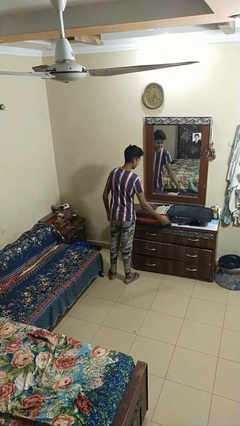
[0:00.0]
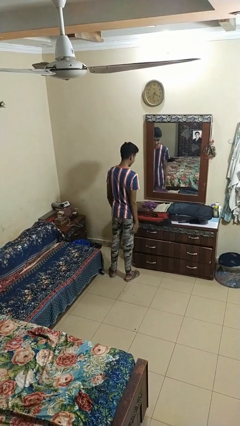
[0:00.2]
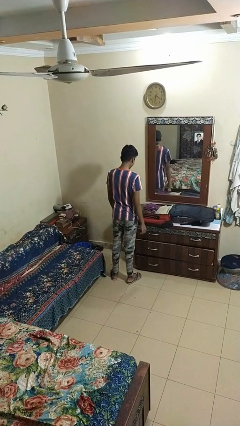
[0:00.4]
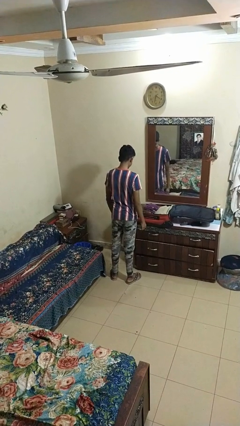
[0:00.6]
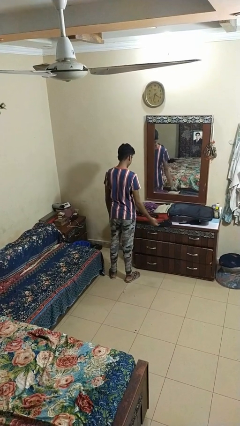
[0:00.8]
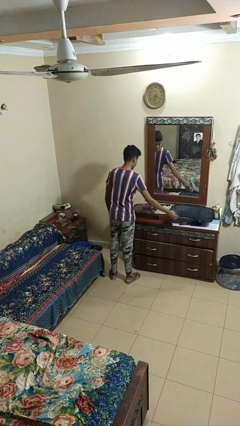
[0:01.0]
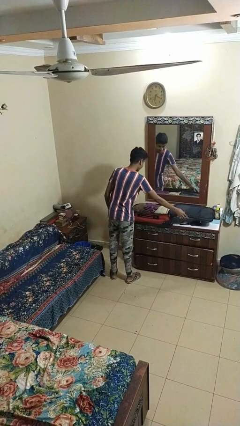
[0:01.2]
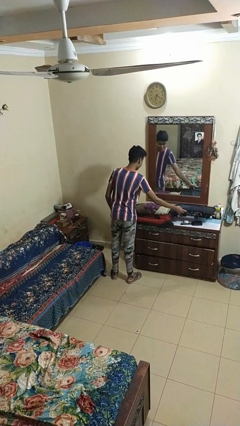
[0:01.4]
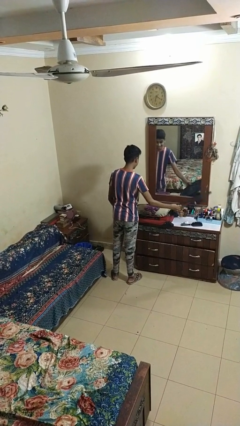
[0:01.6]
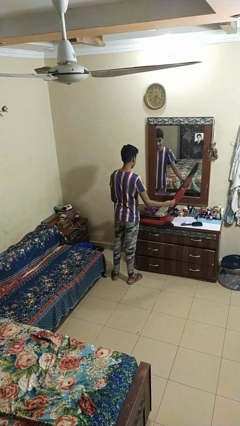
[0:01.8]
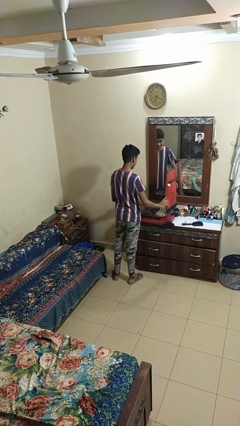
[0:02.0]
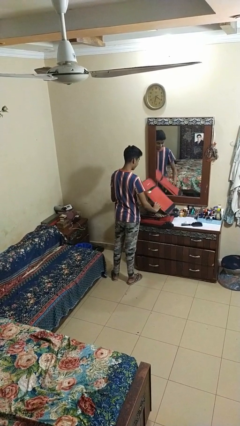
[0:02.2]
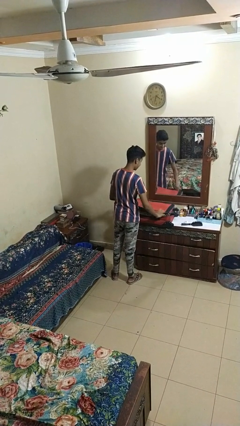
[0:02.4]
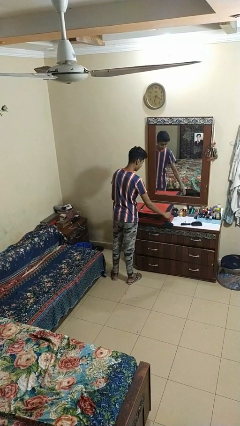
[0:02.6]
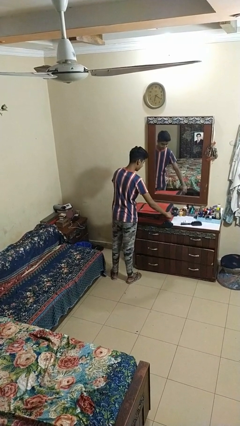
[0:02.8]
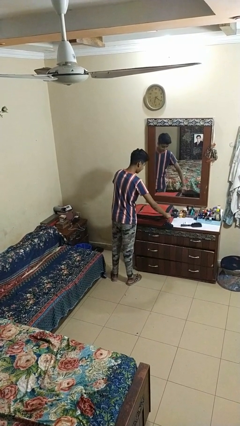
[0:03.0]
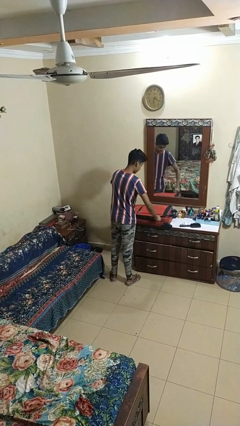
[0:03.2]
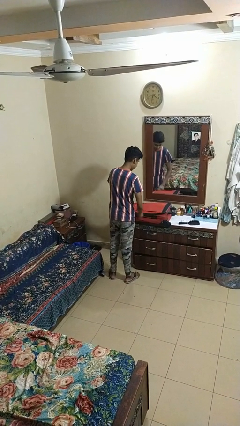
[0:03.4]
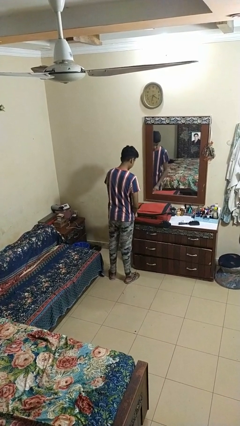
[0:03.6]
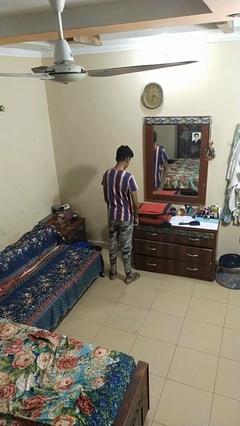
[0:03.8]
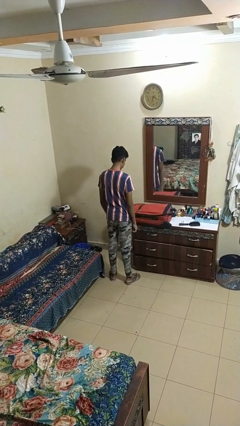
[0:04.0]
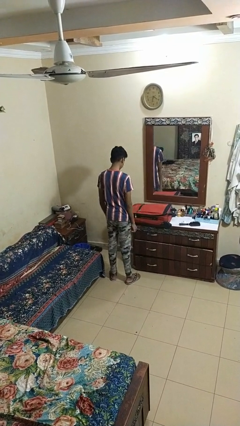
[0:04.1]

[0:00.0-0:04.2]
person closes suitcase

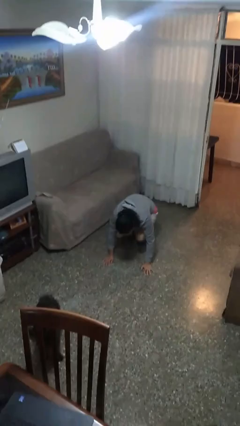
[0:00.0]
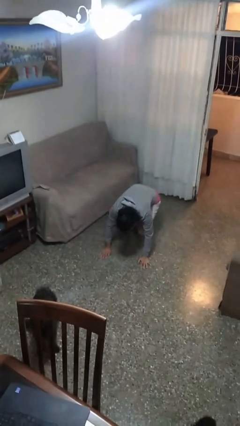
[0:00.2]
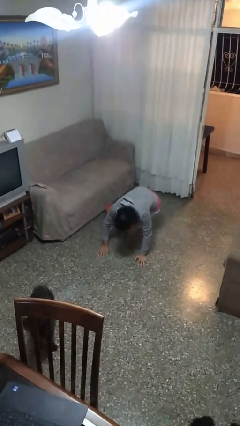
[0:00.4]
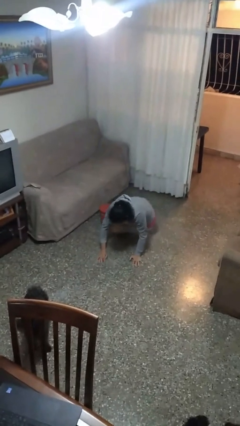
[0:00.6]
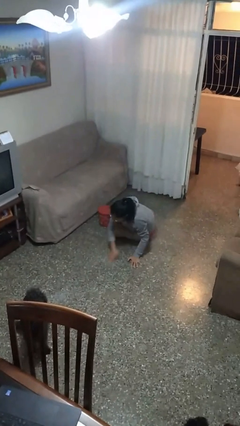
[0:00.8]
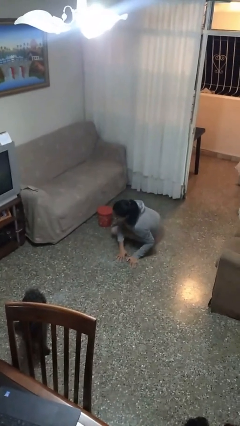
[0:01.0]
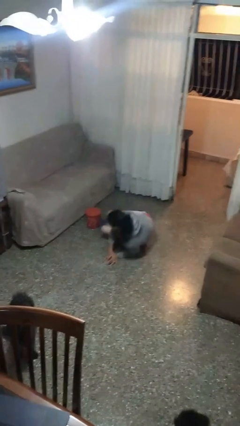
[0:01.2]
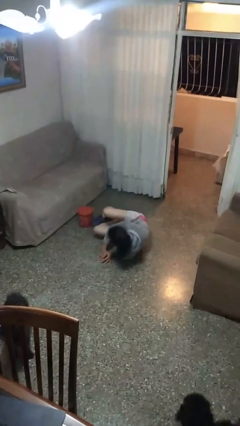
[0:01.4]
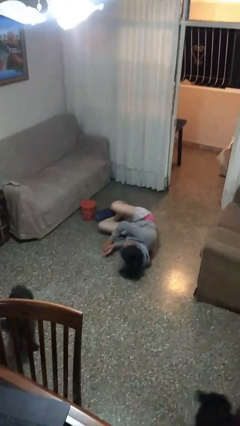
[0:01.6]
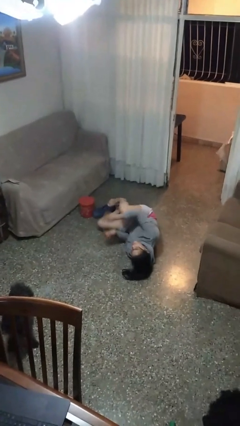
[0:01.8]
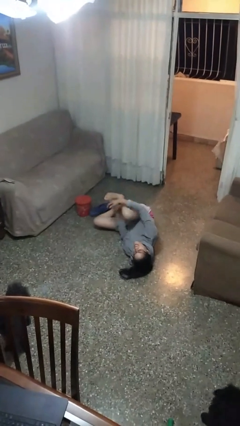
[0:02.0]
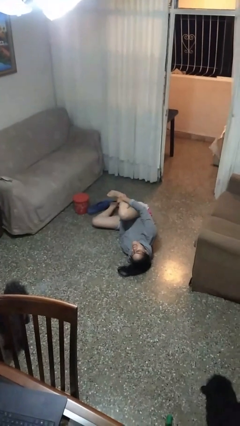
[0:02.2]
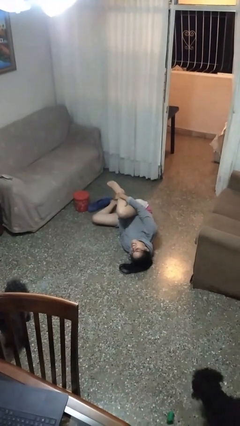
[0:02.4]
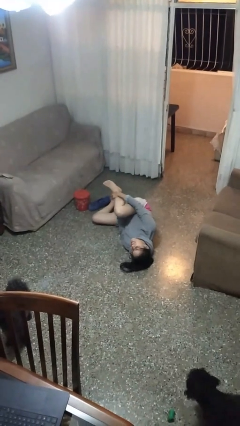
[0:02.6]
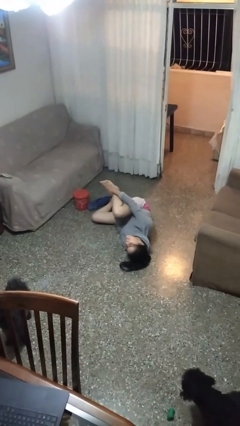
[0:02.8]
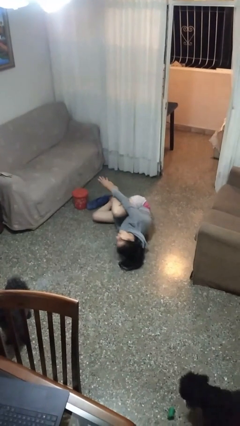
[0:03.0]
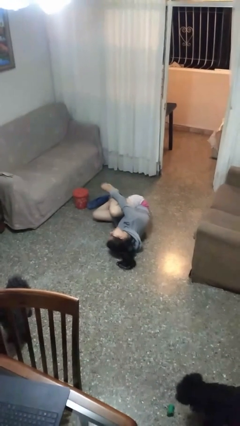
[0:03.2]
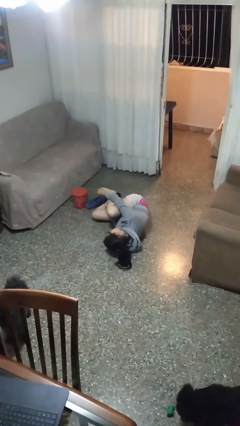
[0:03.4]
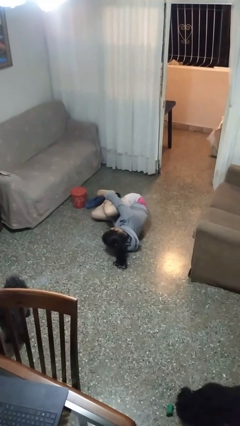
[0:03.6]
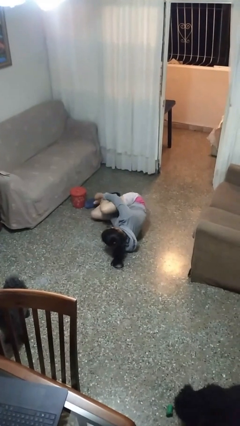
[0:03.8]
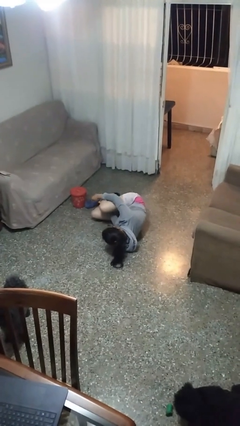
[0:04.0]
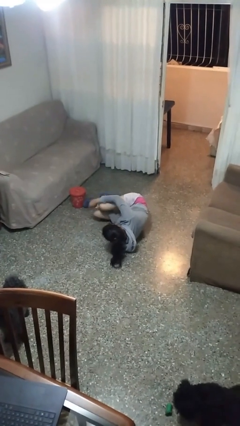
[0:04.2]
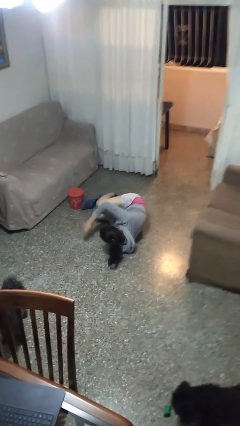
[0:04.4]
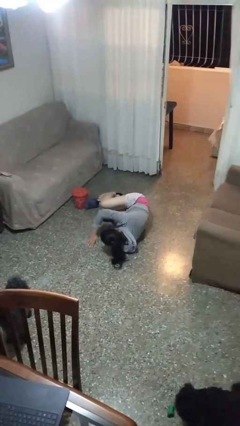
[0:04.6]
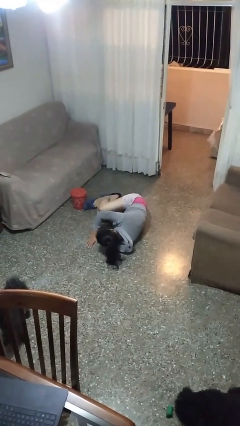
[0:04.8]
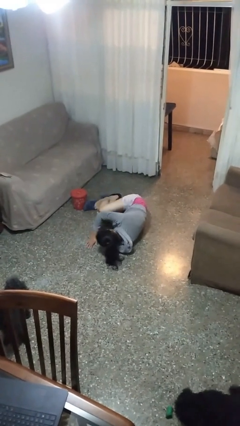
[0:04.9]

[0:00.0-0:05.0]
person lies down on floor

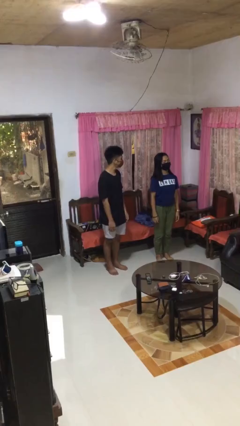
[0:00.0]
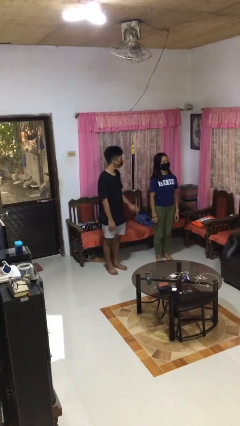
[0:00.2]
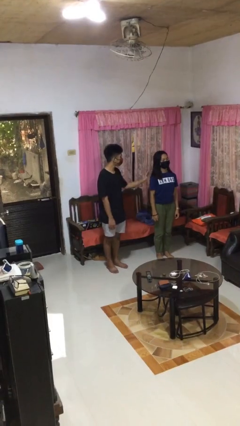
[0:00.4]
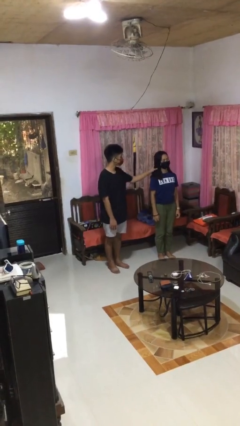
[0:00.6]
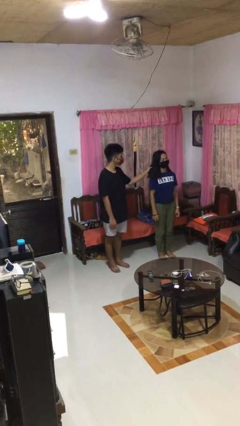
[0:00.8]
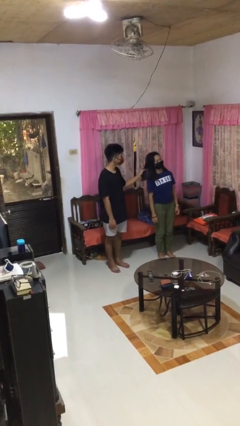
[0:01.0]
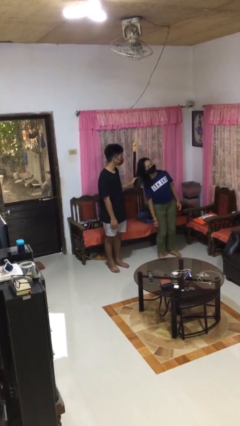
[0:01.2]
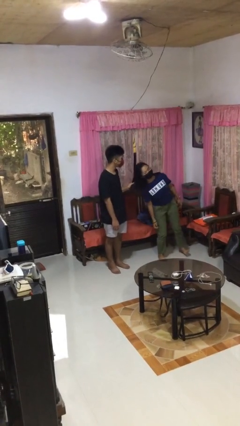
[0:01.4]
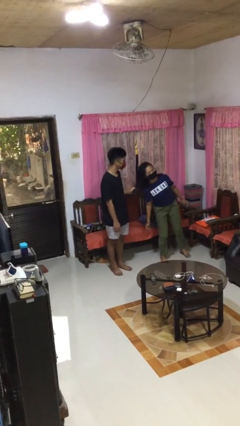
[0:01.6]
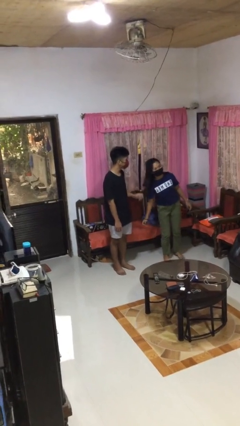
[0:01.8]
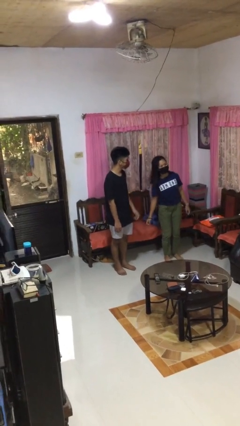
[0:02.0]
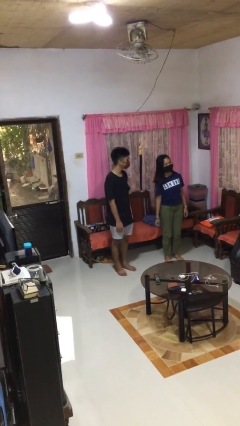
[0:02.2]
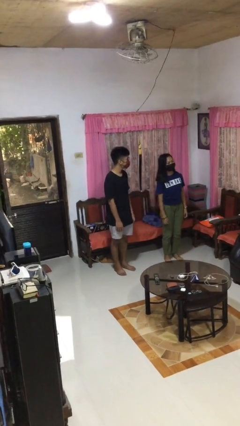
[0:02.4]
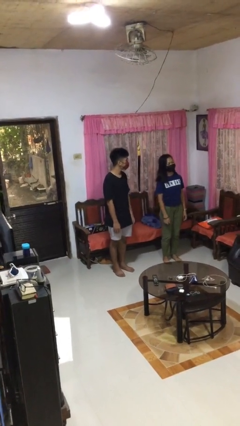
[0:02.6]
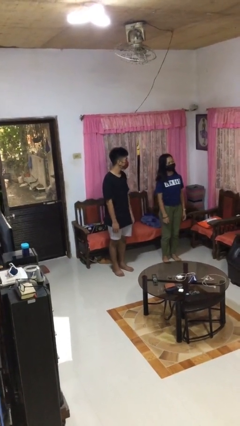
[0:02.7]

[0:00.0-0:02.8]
person grabs person by hair

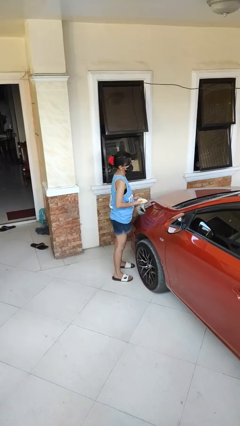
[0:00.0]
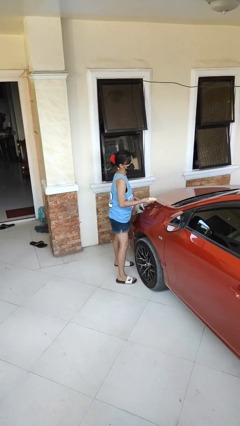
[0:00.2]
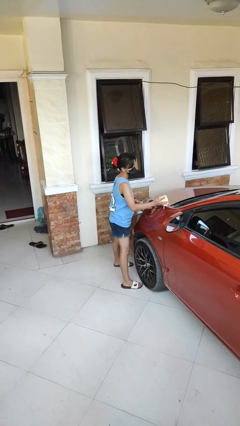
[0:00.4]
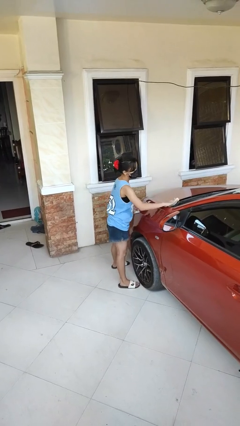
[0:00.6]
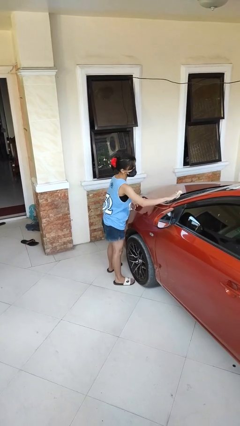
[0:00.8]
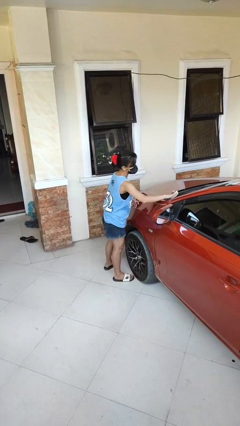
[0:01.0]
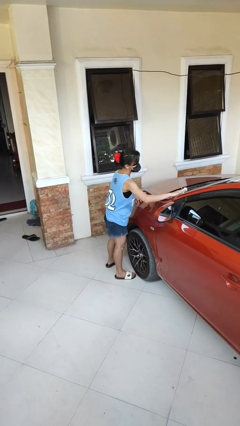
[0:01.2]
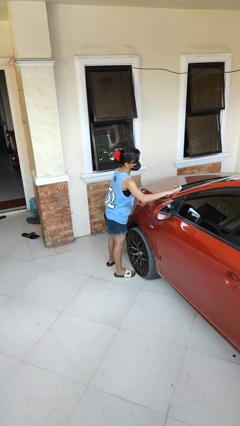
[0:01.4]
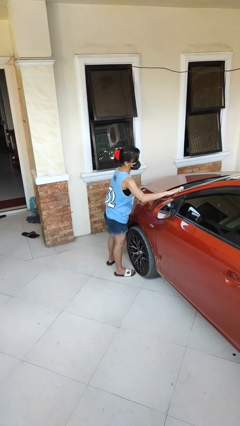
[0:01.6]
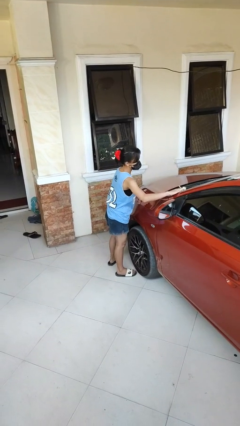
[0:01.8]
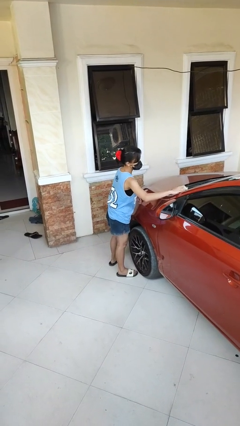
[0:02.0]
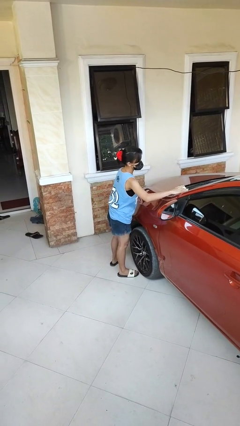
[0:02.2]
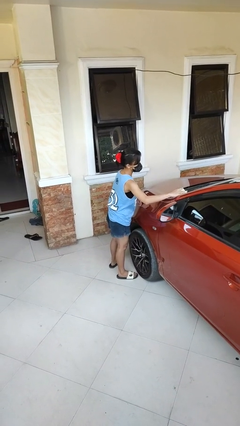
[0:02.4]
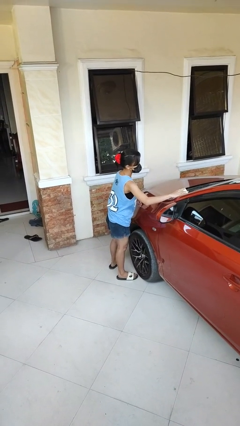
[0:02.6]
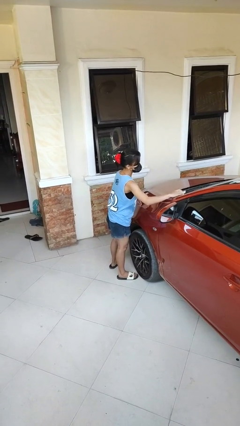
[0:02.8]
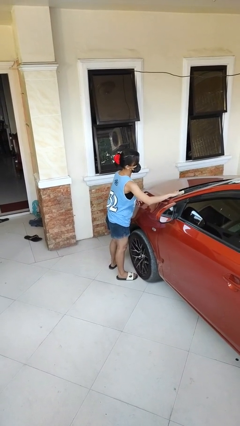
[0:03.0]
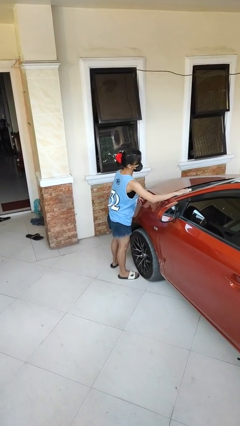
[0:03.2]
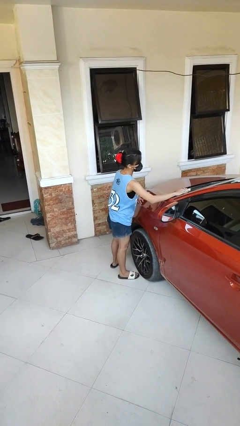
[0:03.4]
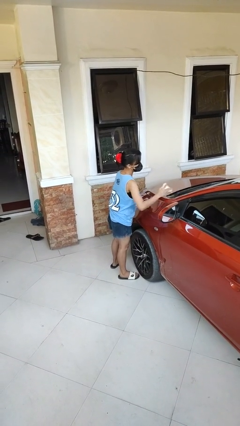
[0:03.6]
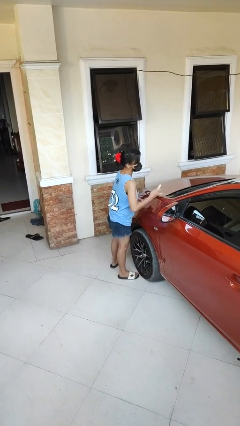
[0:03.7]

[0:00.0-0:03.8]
person polishes car with rag

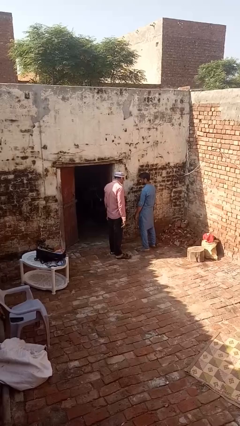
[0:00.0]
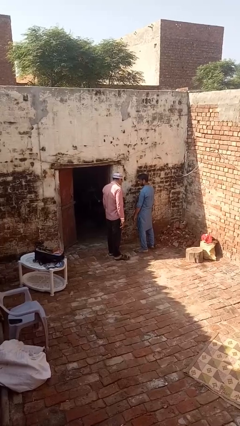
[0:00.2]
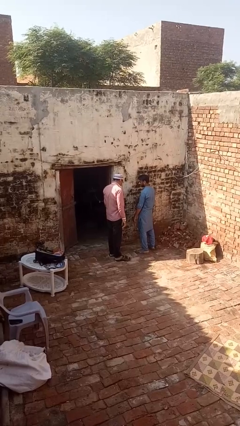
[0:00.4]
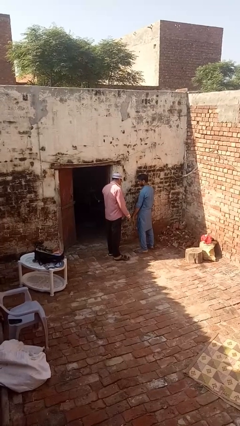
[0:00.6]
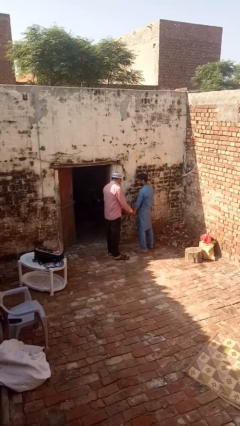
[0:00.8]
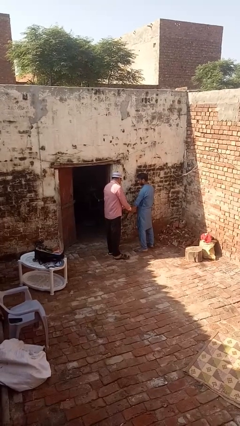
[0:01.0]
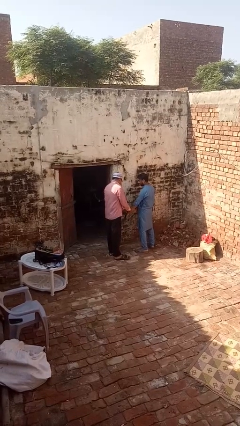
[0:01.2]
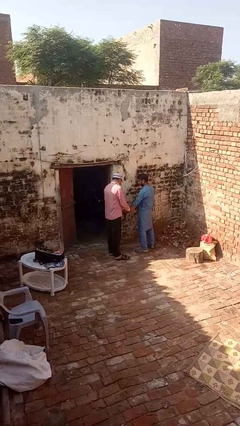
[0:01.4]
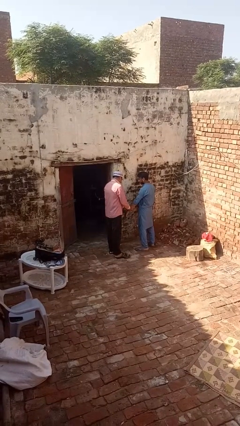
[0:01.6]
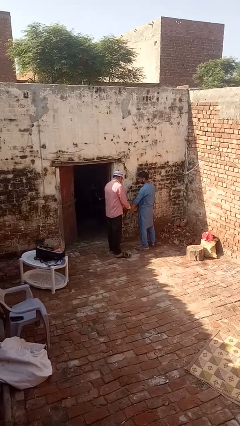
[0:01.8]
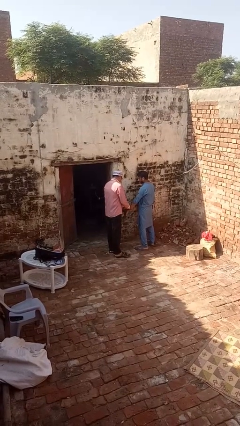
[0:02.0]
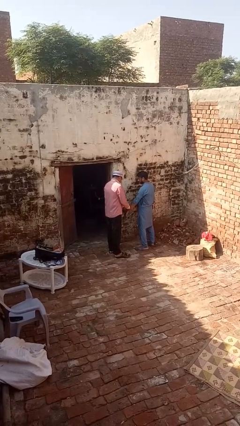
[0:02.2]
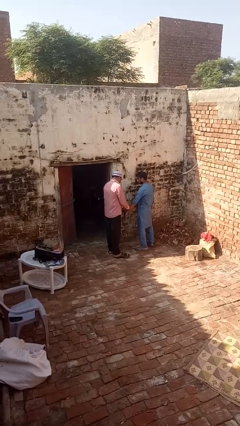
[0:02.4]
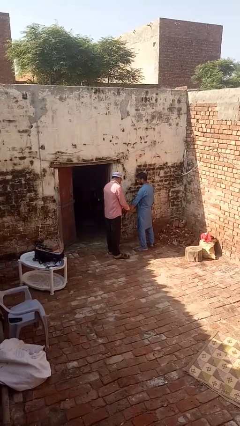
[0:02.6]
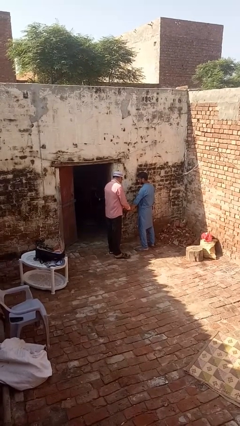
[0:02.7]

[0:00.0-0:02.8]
person grabs person by forearm
